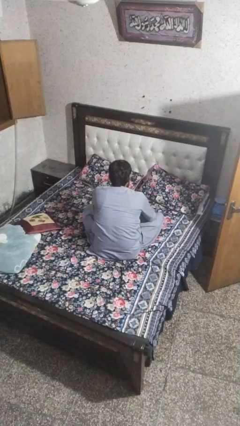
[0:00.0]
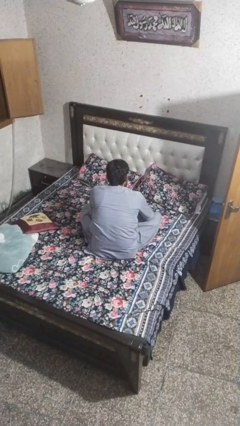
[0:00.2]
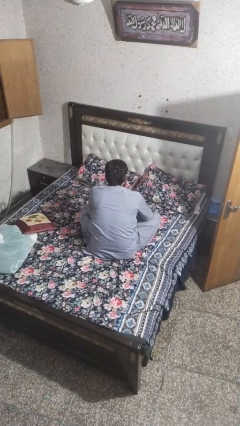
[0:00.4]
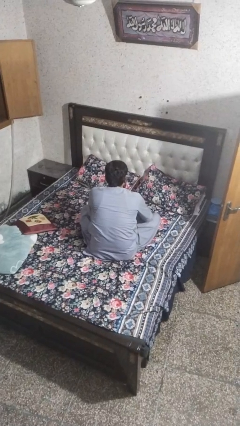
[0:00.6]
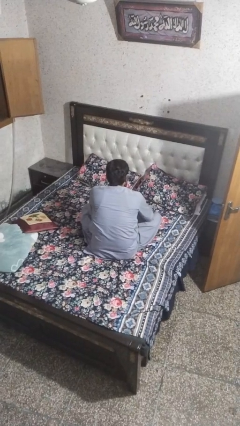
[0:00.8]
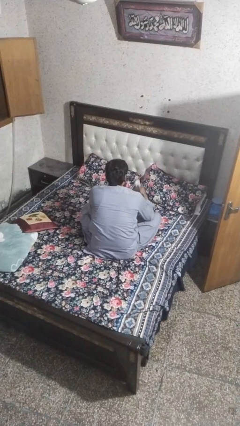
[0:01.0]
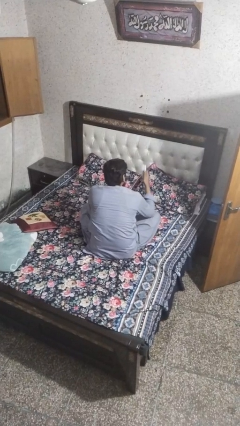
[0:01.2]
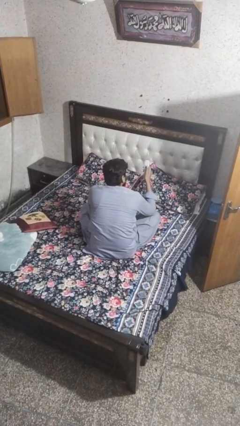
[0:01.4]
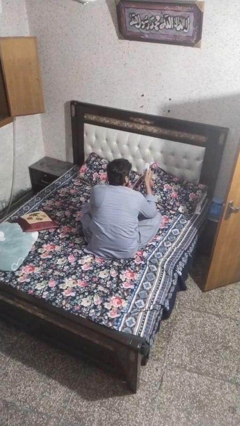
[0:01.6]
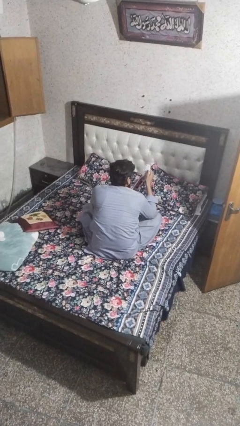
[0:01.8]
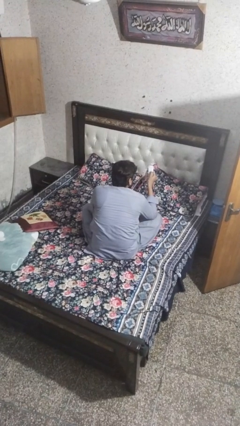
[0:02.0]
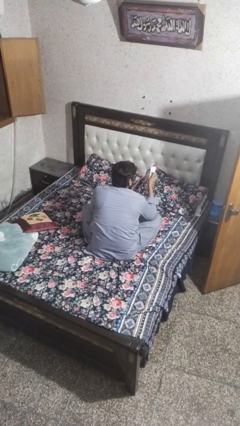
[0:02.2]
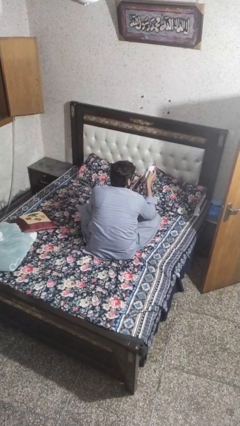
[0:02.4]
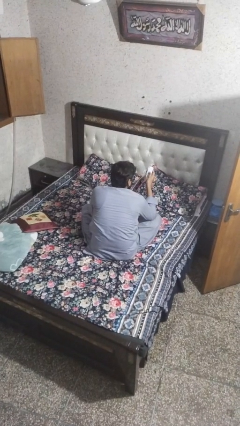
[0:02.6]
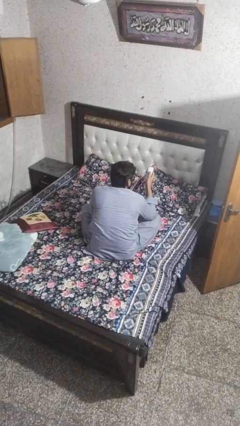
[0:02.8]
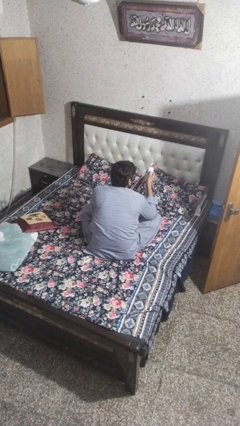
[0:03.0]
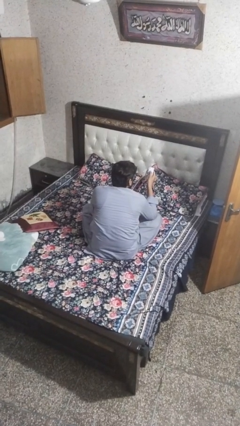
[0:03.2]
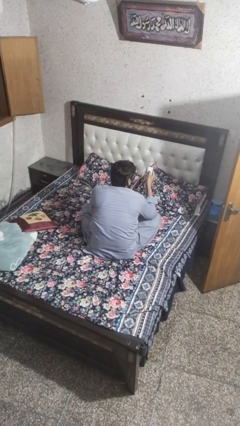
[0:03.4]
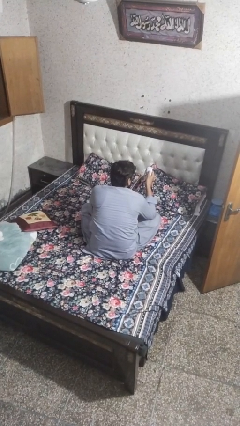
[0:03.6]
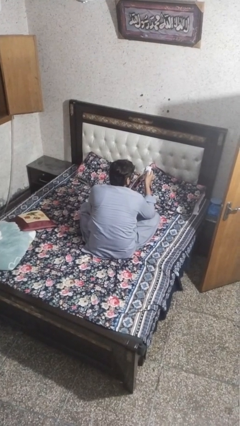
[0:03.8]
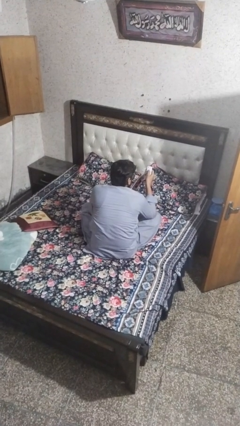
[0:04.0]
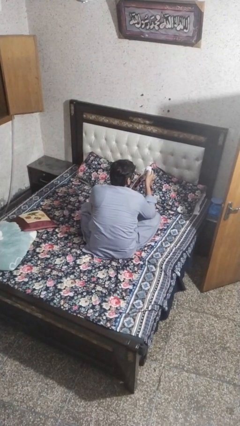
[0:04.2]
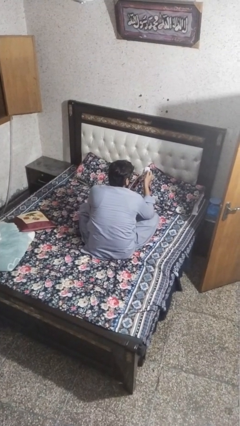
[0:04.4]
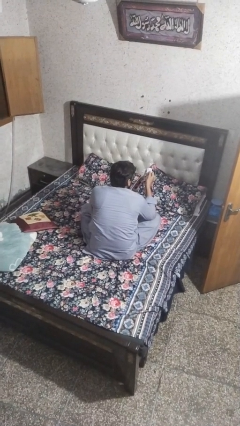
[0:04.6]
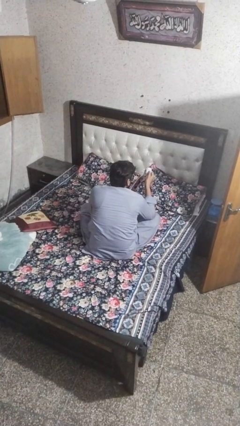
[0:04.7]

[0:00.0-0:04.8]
person uses television remote

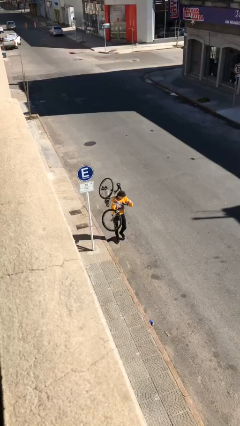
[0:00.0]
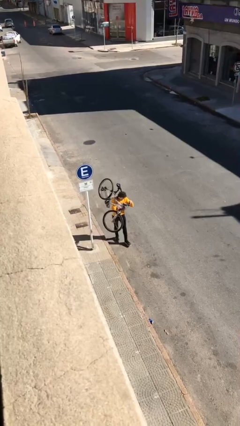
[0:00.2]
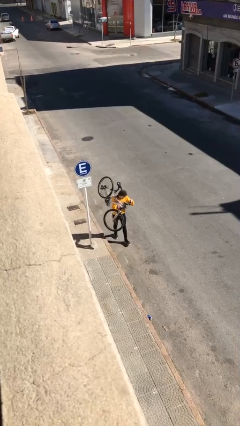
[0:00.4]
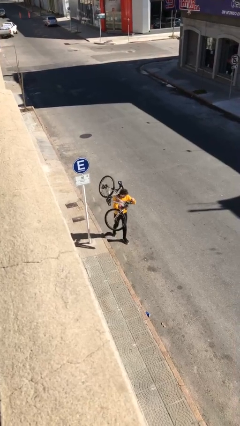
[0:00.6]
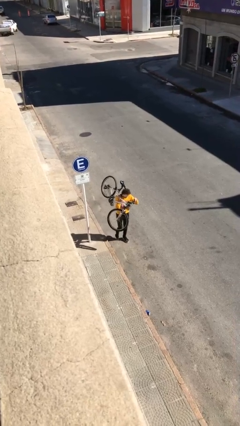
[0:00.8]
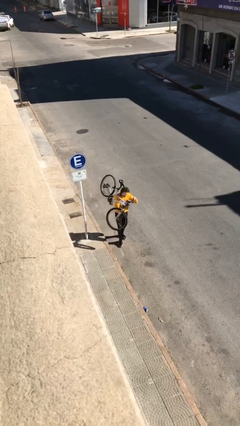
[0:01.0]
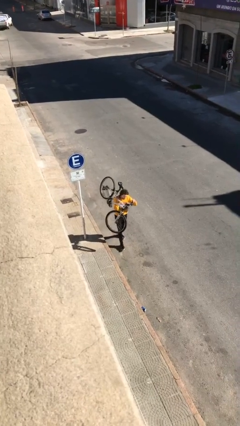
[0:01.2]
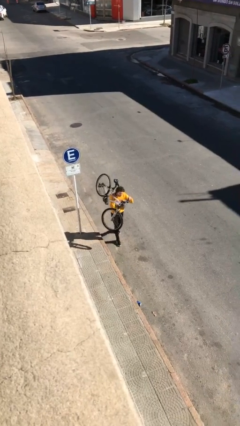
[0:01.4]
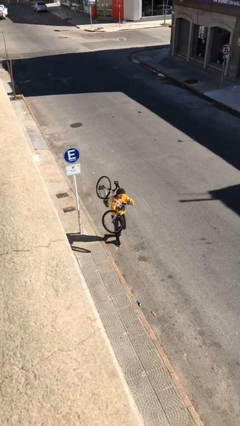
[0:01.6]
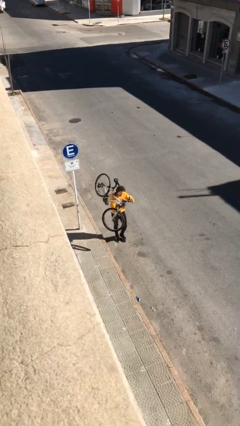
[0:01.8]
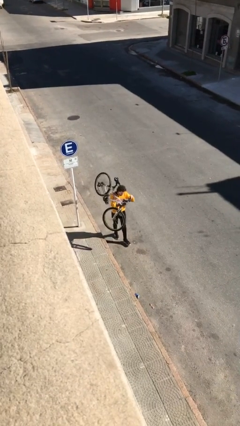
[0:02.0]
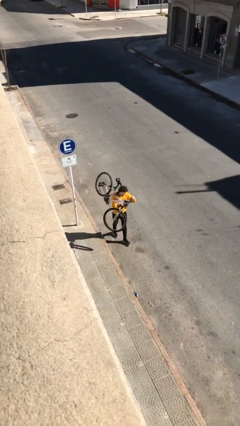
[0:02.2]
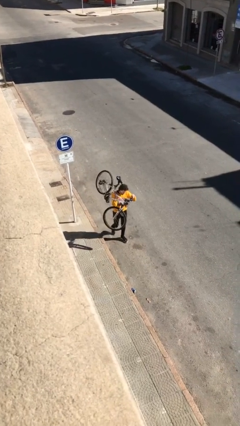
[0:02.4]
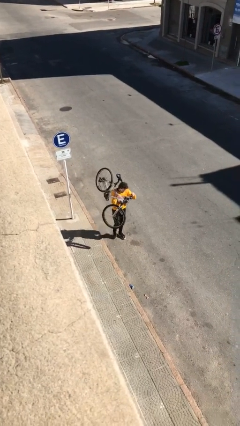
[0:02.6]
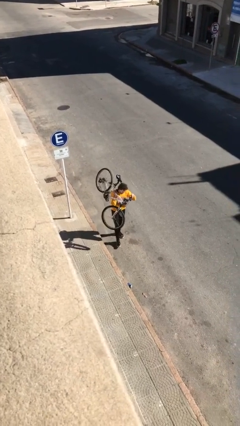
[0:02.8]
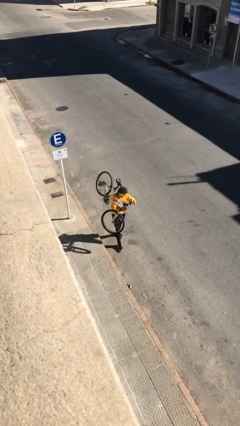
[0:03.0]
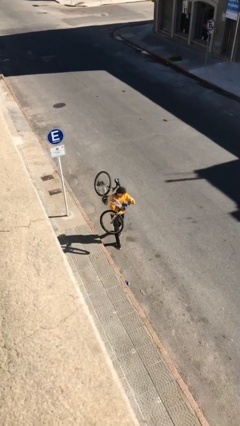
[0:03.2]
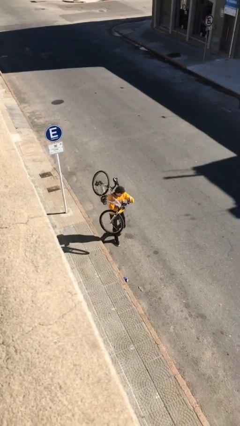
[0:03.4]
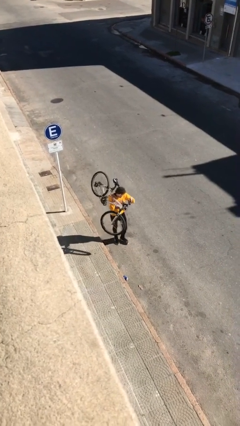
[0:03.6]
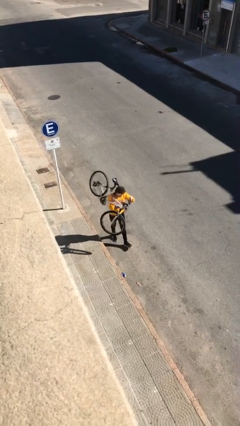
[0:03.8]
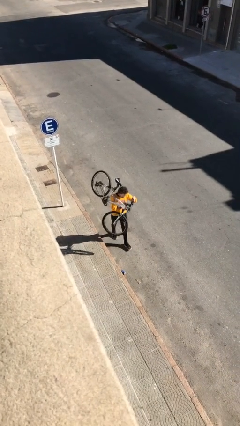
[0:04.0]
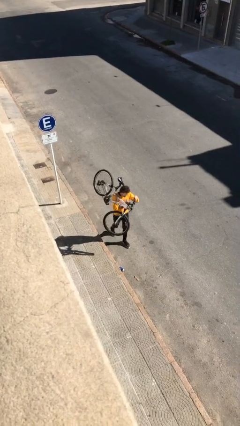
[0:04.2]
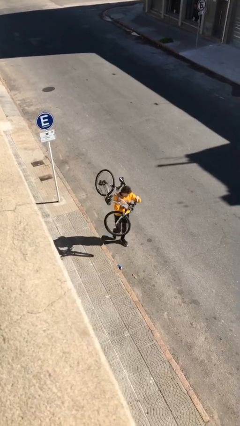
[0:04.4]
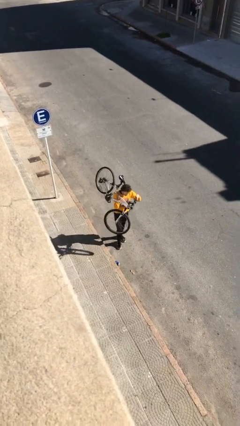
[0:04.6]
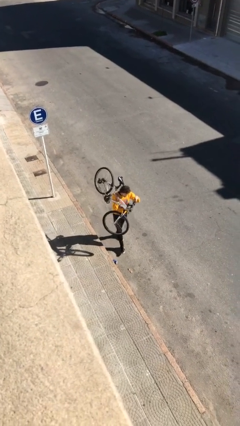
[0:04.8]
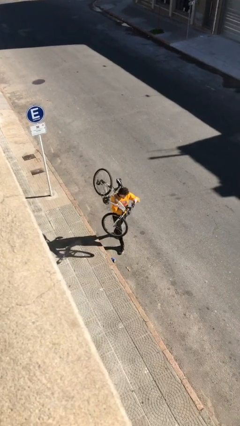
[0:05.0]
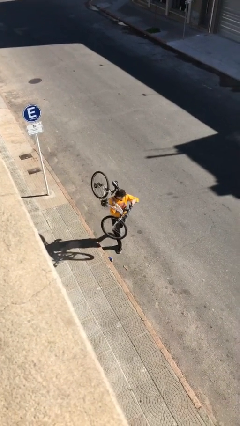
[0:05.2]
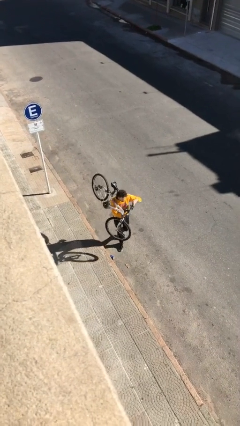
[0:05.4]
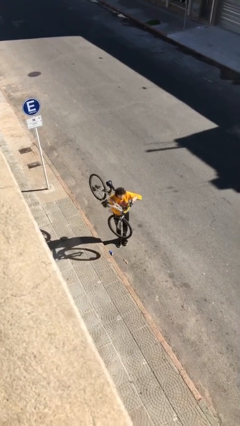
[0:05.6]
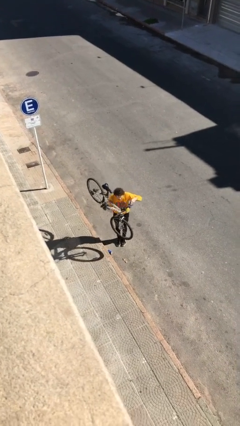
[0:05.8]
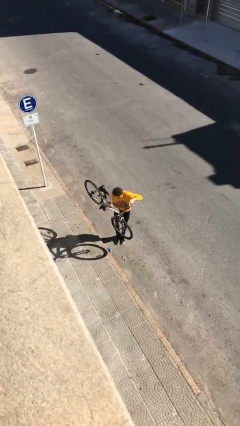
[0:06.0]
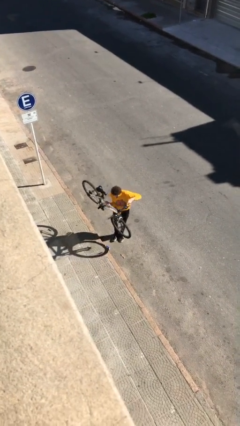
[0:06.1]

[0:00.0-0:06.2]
person carries heavy object

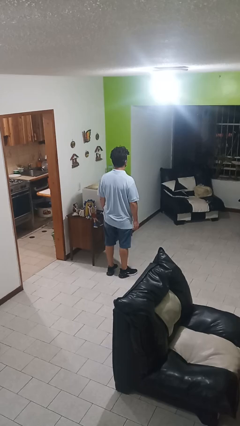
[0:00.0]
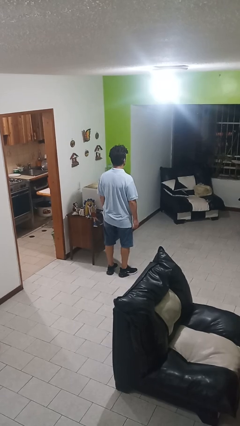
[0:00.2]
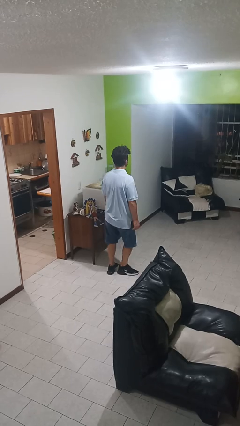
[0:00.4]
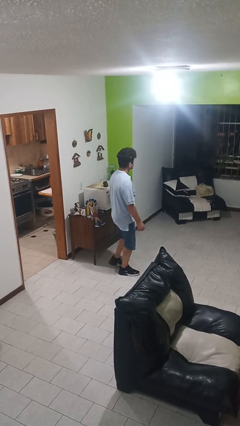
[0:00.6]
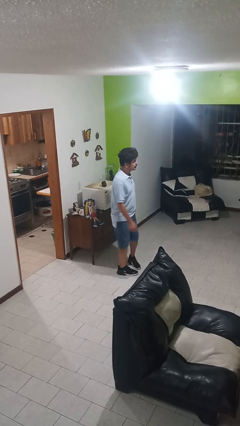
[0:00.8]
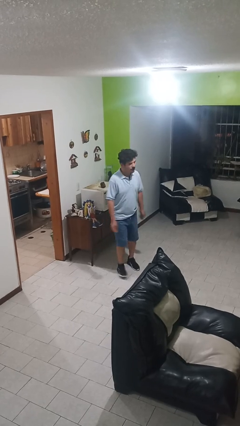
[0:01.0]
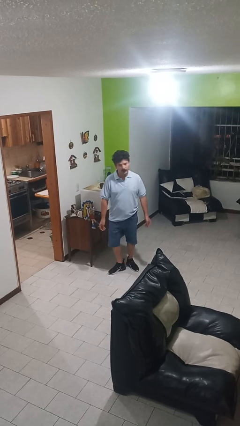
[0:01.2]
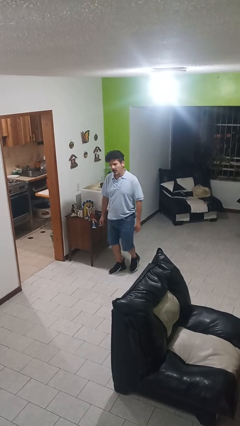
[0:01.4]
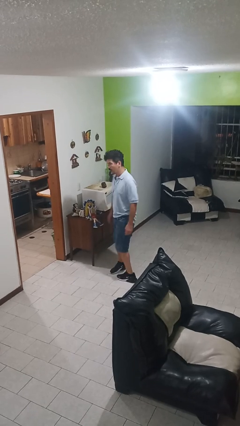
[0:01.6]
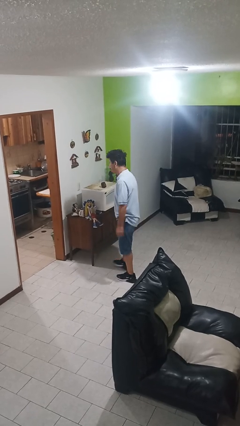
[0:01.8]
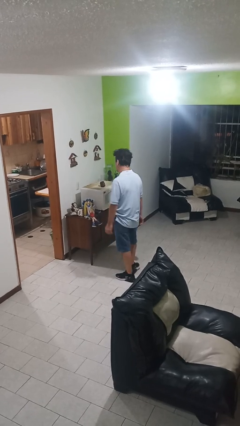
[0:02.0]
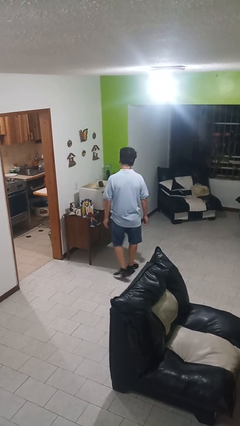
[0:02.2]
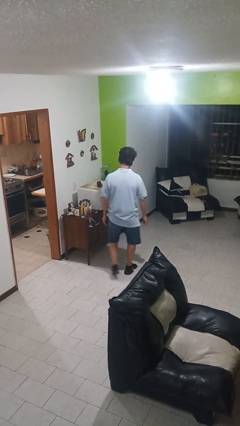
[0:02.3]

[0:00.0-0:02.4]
person twirls

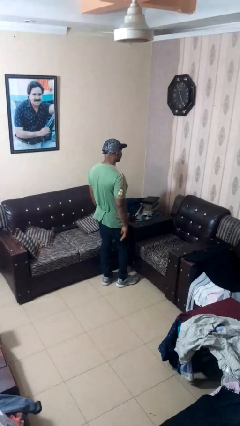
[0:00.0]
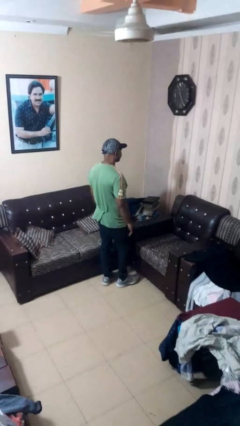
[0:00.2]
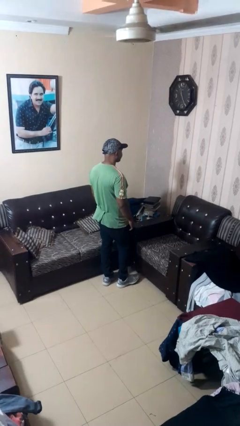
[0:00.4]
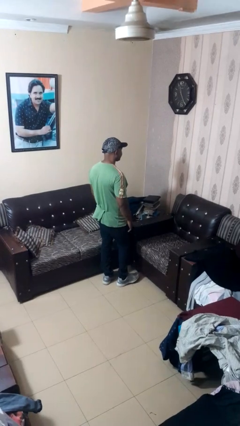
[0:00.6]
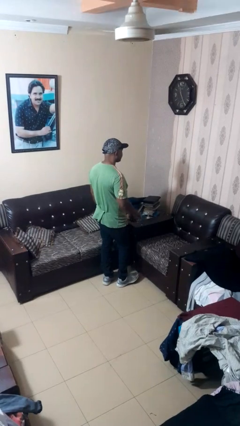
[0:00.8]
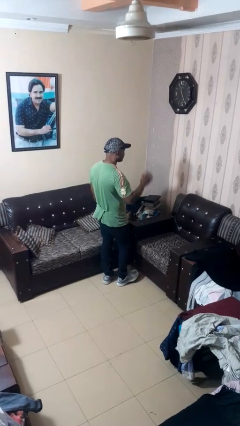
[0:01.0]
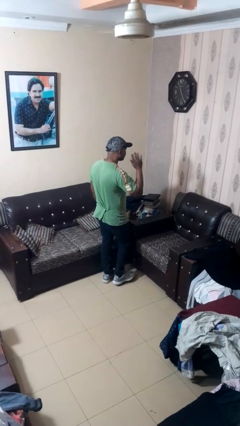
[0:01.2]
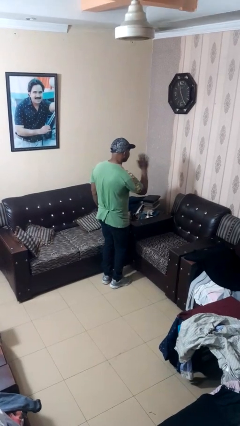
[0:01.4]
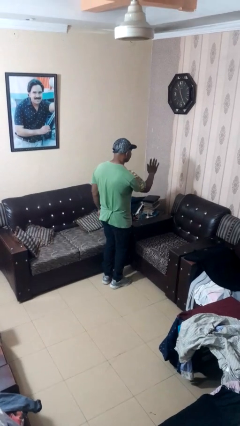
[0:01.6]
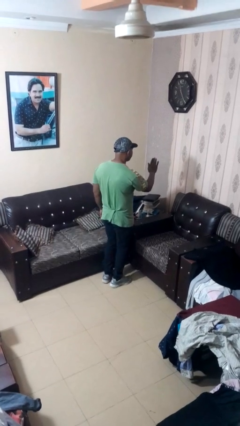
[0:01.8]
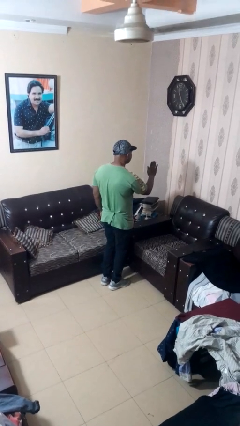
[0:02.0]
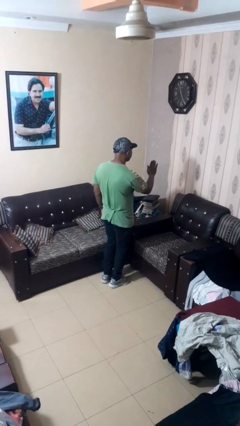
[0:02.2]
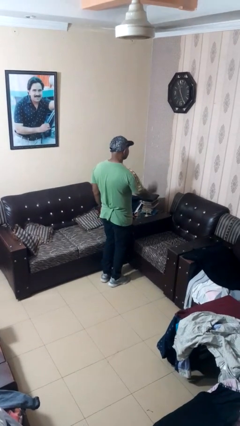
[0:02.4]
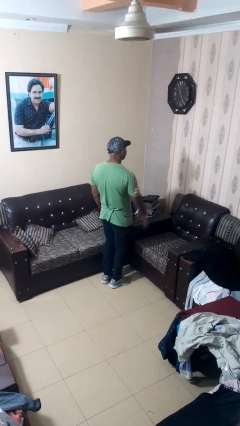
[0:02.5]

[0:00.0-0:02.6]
person gestures stop

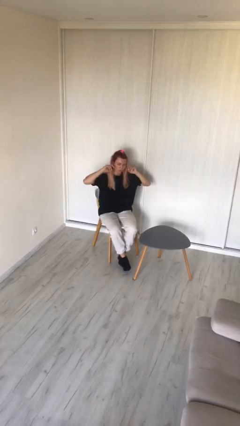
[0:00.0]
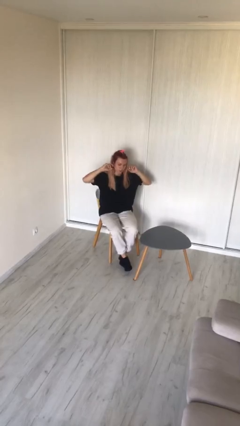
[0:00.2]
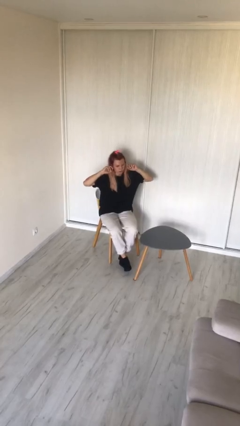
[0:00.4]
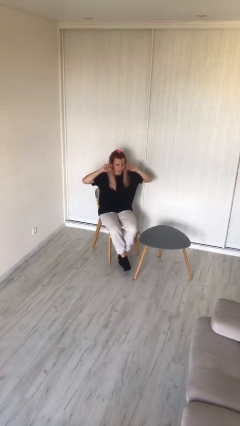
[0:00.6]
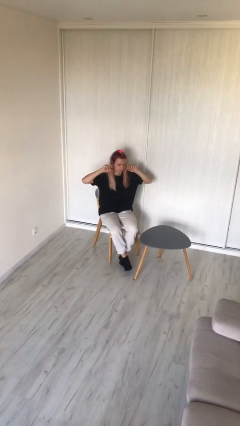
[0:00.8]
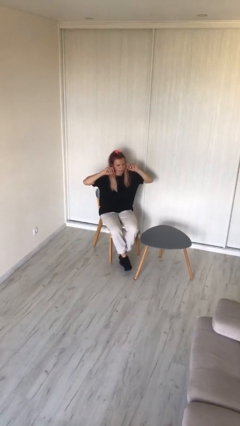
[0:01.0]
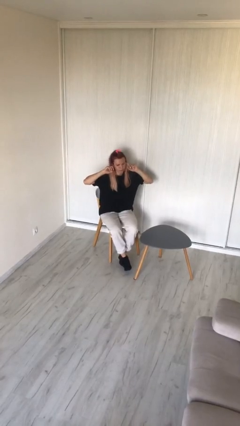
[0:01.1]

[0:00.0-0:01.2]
person puts fingers in ear

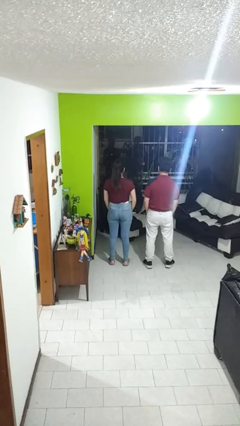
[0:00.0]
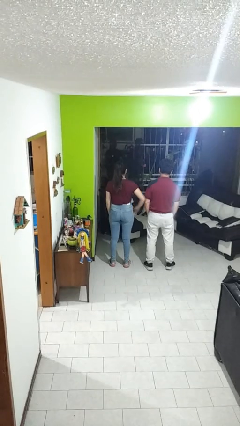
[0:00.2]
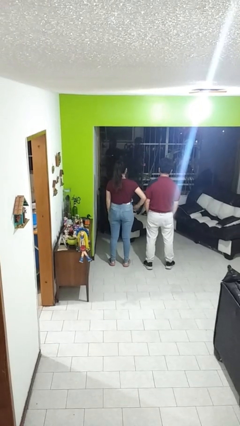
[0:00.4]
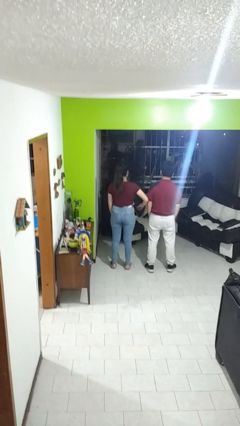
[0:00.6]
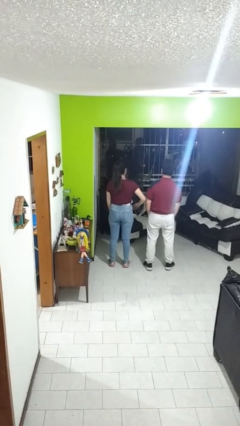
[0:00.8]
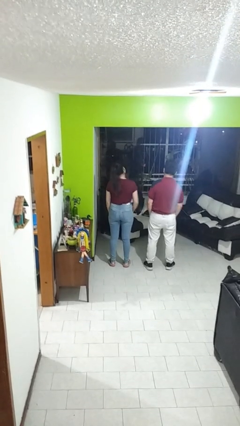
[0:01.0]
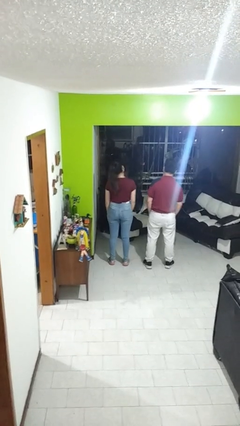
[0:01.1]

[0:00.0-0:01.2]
person nudges person with elbow
